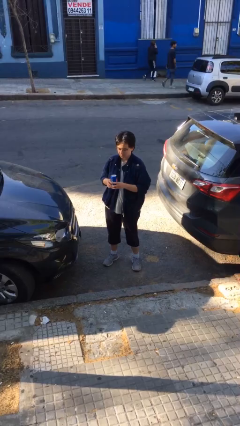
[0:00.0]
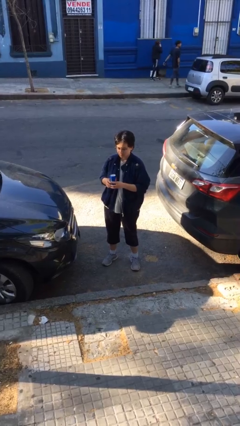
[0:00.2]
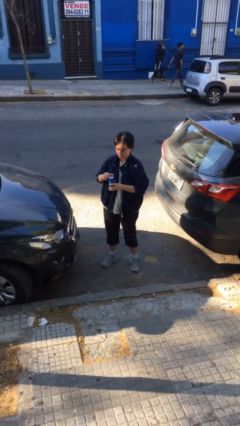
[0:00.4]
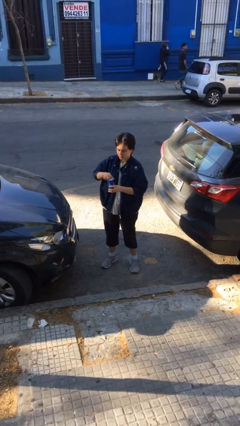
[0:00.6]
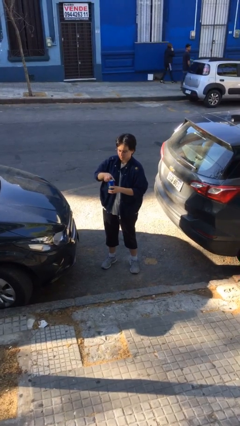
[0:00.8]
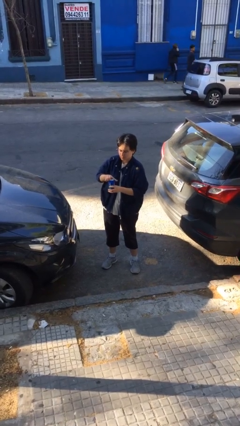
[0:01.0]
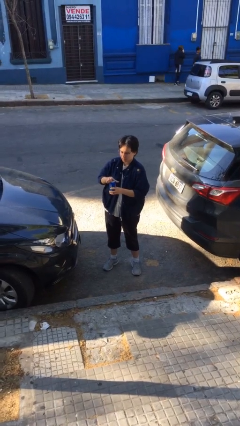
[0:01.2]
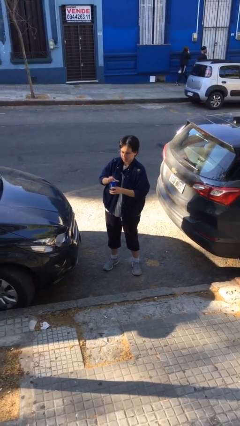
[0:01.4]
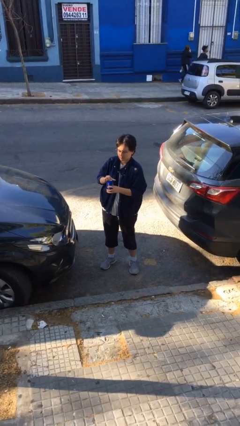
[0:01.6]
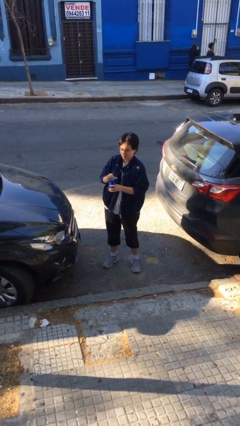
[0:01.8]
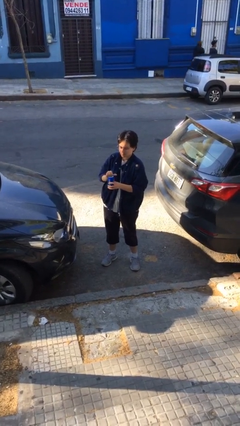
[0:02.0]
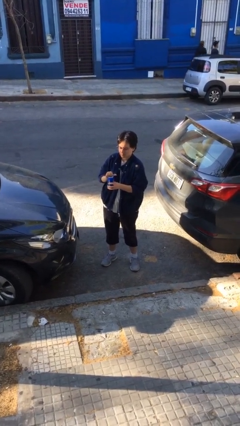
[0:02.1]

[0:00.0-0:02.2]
person opens beverage can

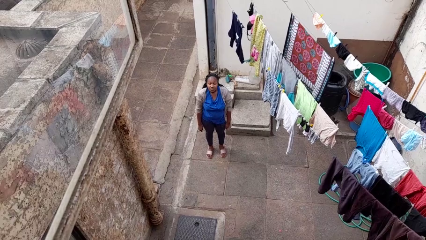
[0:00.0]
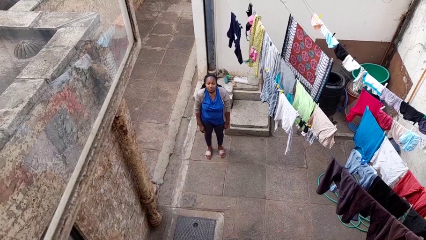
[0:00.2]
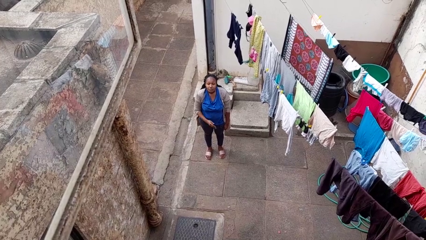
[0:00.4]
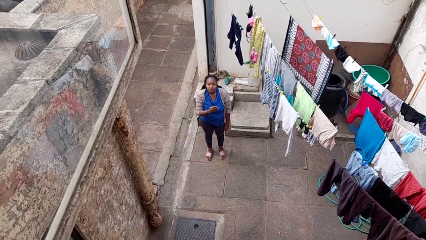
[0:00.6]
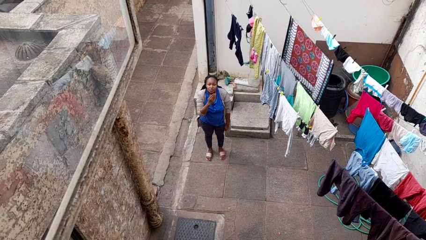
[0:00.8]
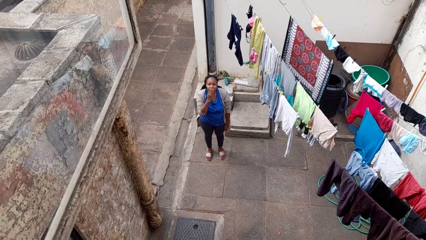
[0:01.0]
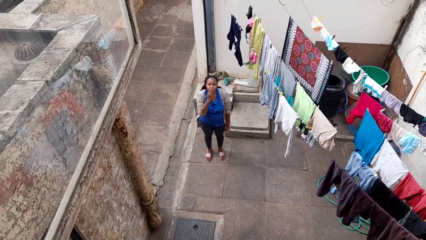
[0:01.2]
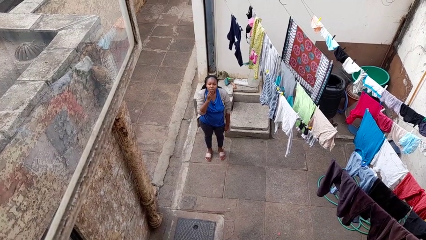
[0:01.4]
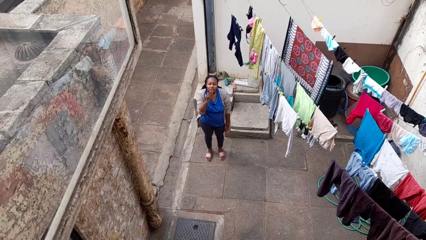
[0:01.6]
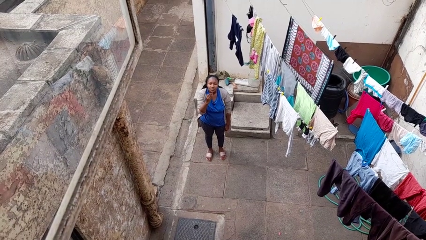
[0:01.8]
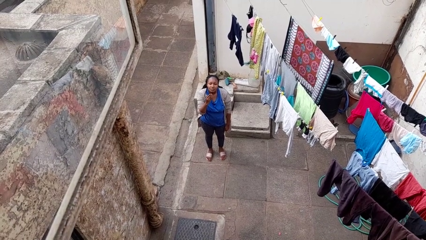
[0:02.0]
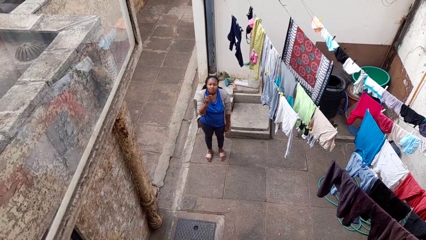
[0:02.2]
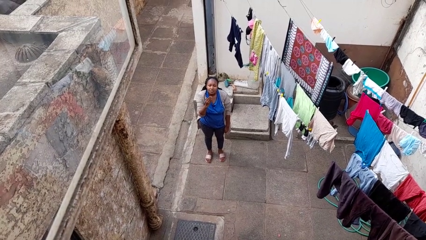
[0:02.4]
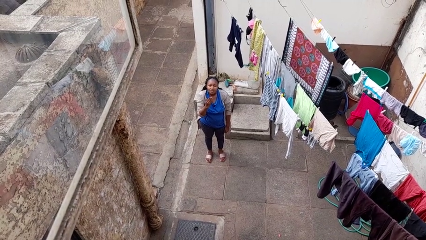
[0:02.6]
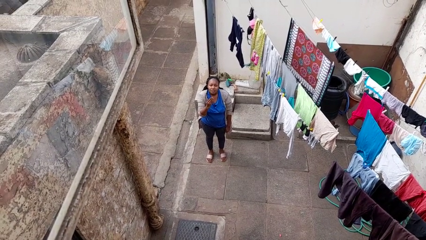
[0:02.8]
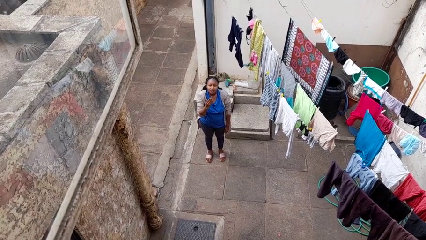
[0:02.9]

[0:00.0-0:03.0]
person gestures blow kiss

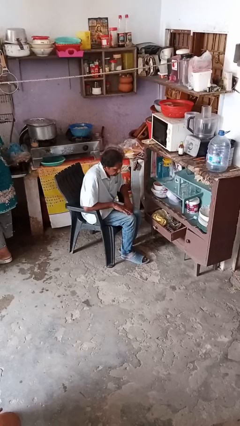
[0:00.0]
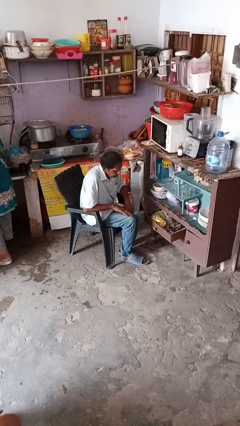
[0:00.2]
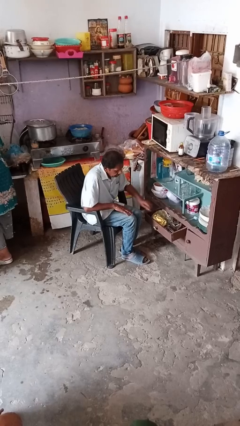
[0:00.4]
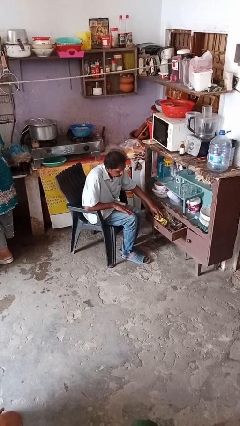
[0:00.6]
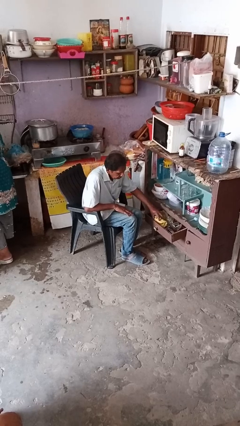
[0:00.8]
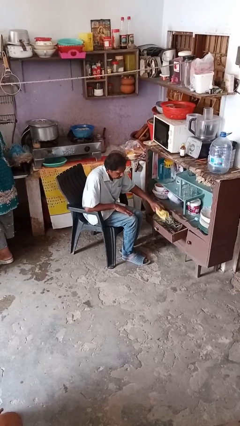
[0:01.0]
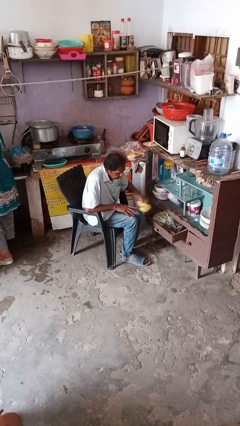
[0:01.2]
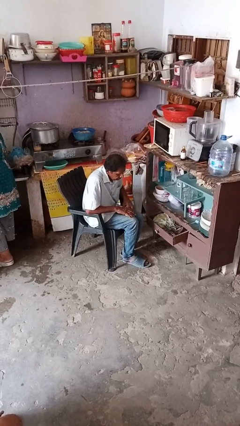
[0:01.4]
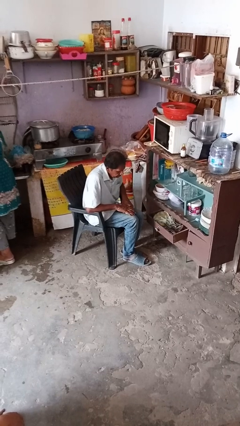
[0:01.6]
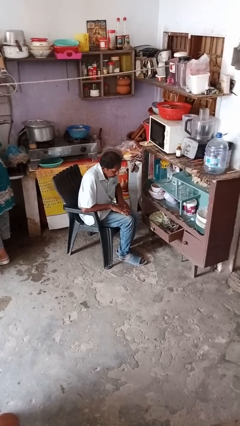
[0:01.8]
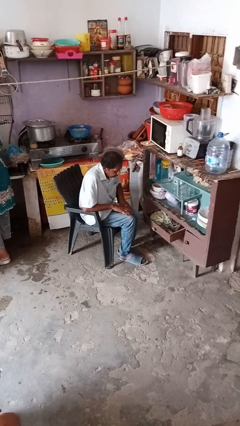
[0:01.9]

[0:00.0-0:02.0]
person takes clothes from dresser

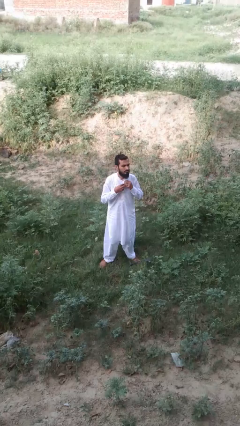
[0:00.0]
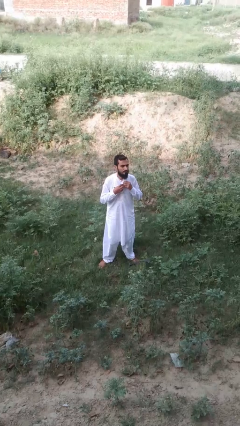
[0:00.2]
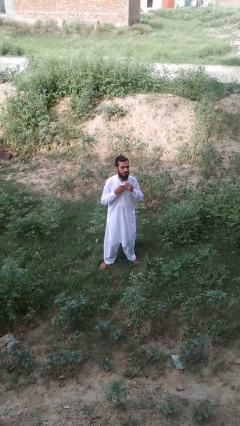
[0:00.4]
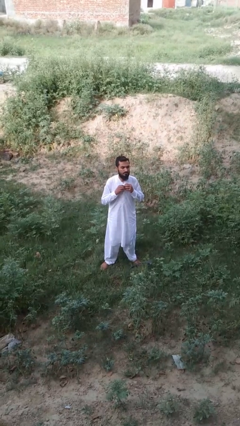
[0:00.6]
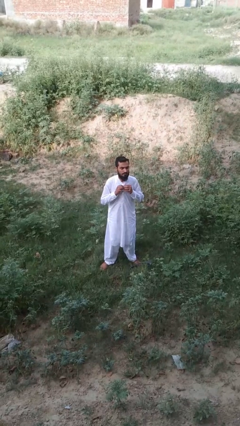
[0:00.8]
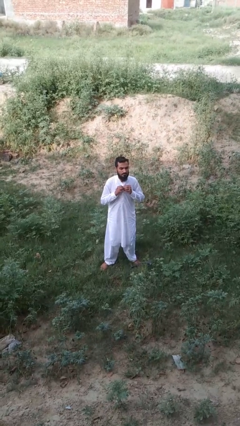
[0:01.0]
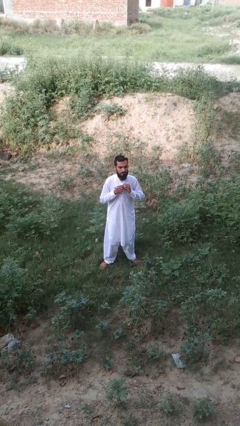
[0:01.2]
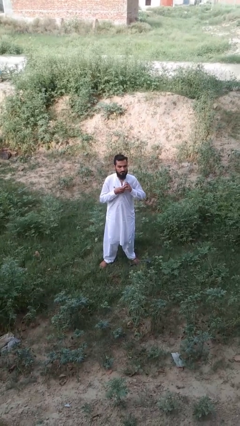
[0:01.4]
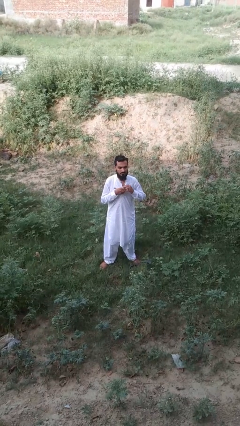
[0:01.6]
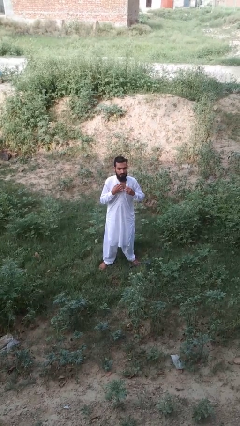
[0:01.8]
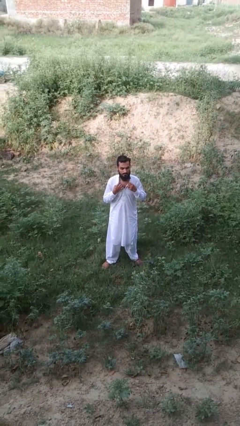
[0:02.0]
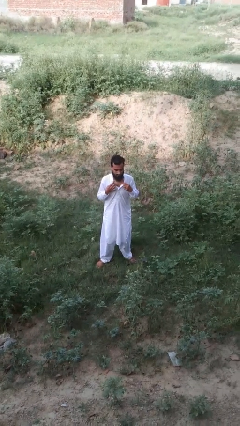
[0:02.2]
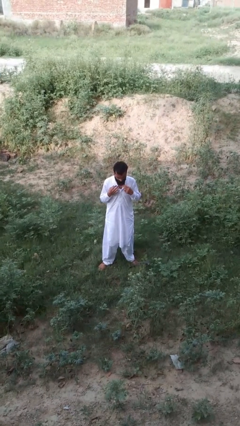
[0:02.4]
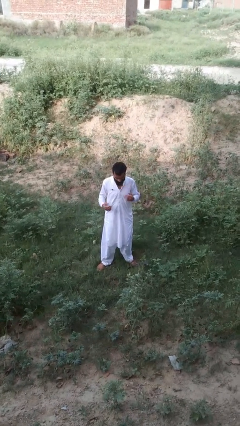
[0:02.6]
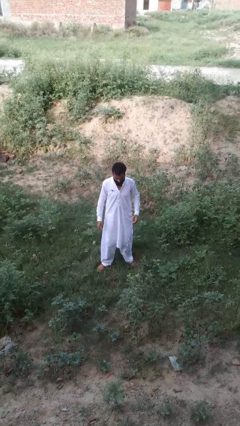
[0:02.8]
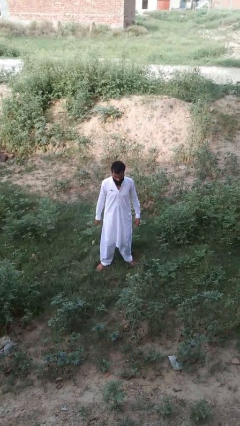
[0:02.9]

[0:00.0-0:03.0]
person unbuttons shirt

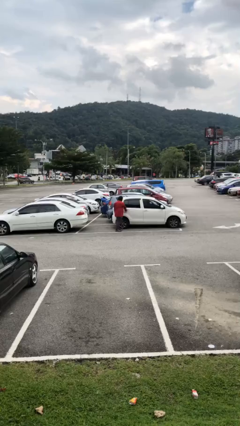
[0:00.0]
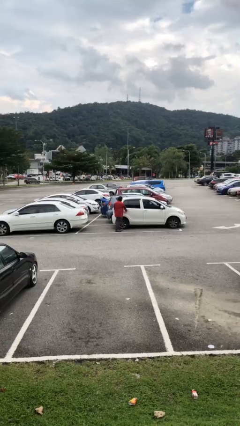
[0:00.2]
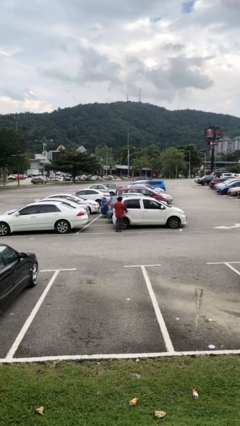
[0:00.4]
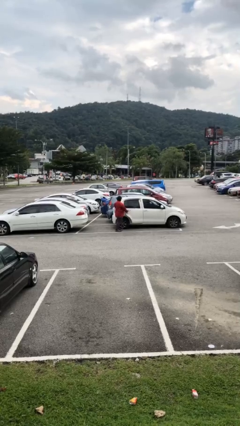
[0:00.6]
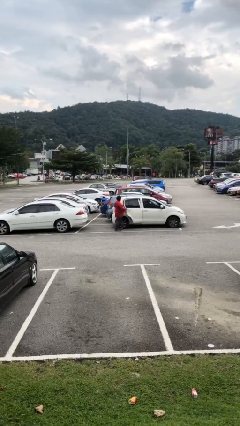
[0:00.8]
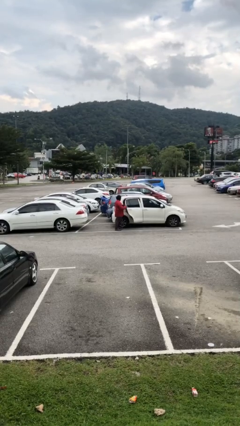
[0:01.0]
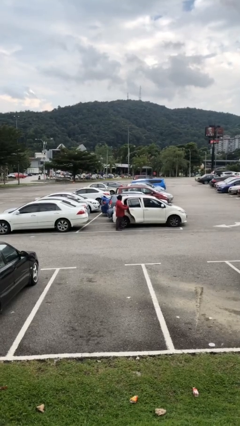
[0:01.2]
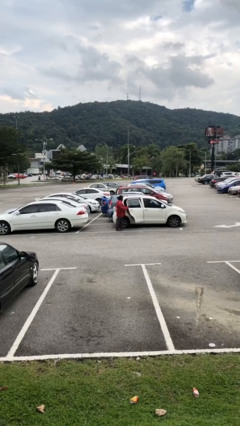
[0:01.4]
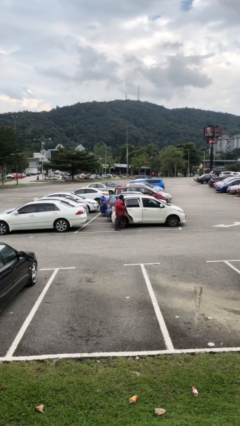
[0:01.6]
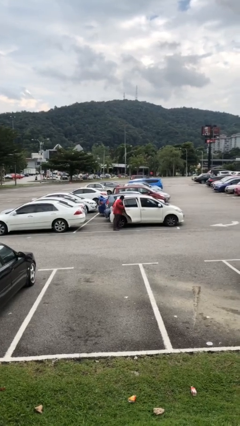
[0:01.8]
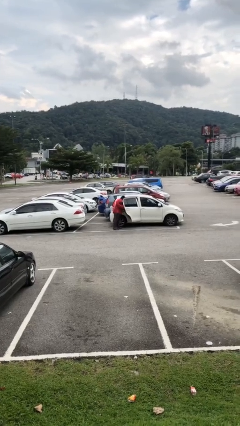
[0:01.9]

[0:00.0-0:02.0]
person opens car door

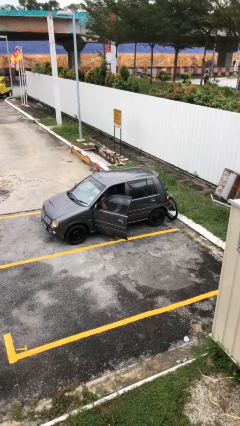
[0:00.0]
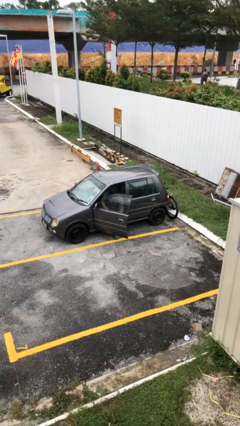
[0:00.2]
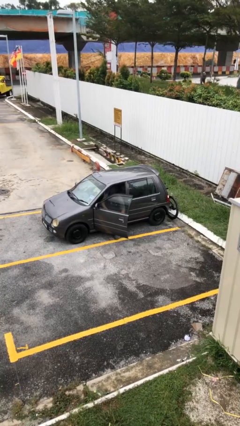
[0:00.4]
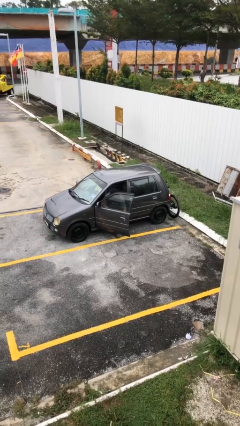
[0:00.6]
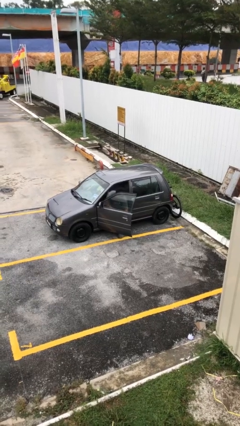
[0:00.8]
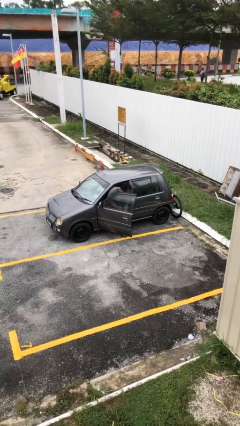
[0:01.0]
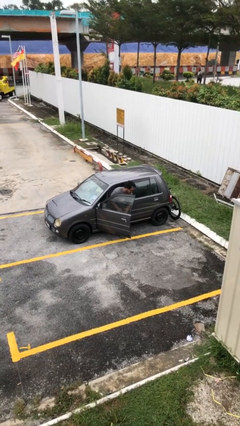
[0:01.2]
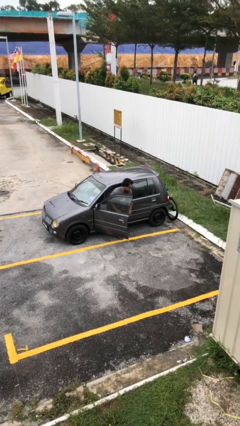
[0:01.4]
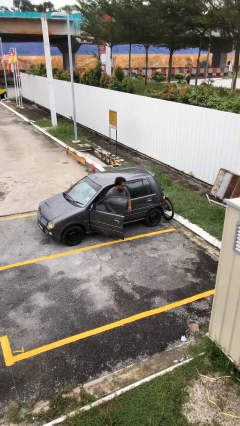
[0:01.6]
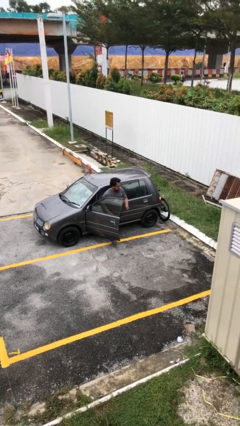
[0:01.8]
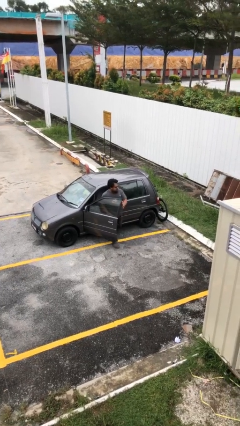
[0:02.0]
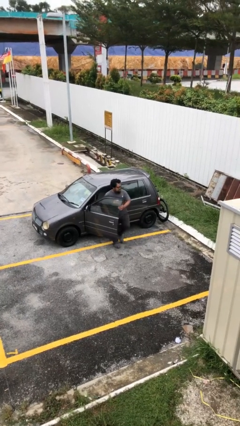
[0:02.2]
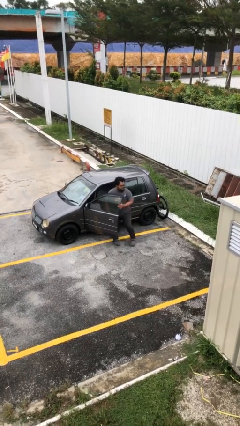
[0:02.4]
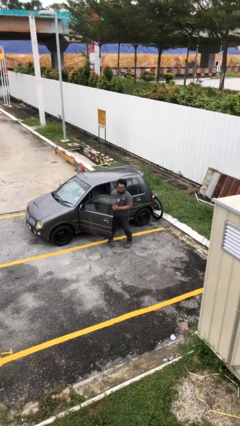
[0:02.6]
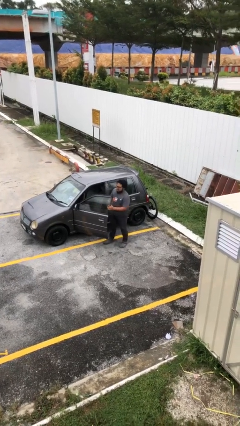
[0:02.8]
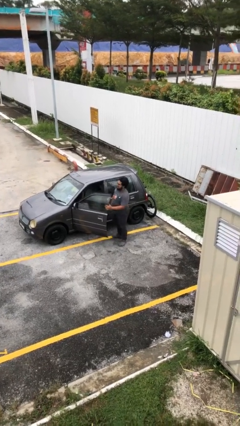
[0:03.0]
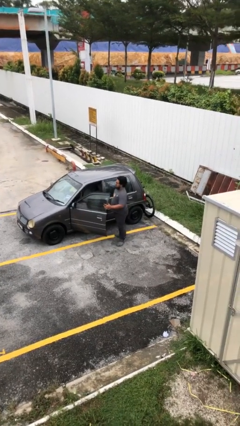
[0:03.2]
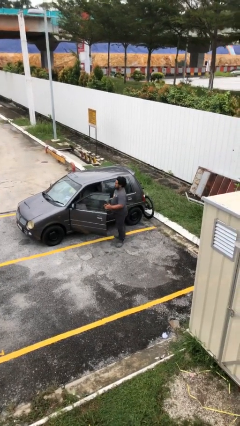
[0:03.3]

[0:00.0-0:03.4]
person exits car

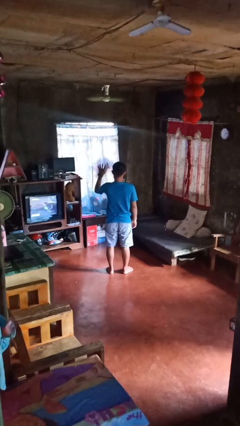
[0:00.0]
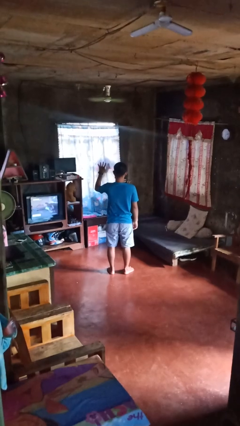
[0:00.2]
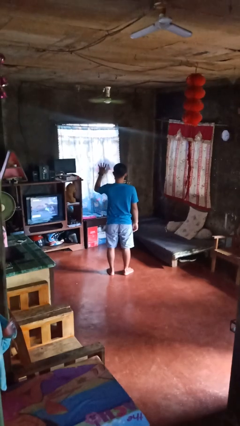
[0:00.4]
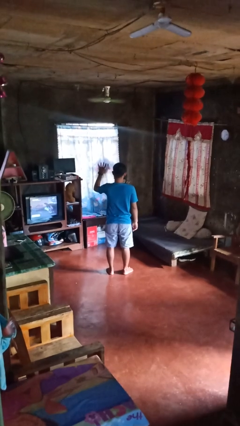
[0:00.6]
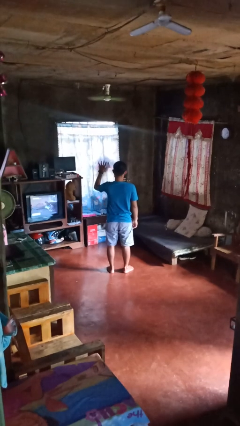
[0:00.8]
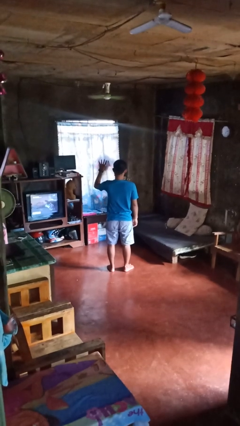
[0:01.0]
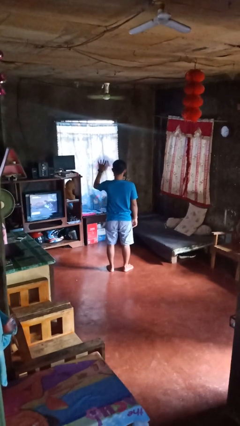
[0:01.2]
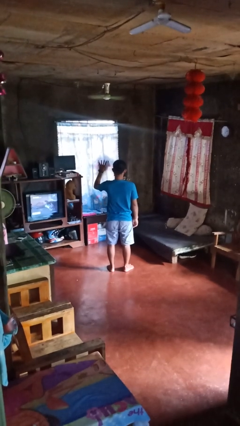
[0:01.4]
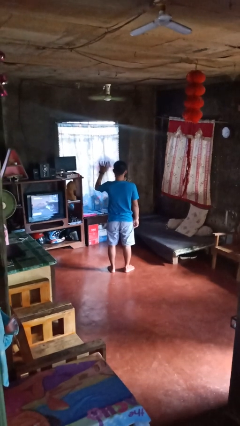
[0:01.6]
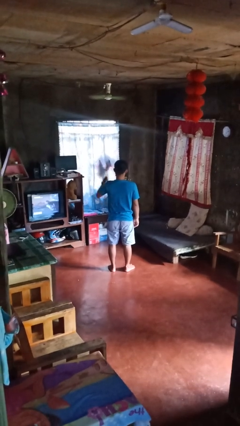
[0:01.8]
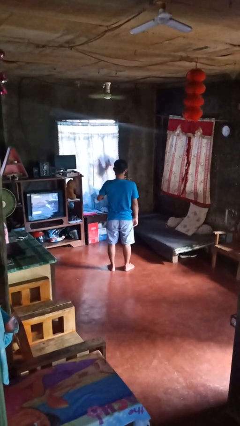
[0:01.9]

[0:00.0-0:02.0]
person gestures number four
